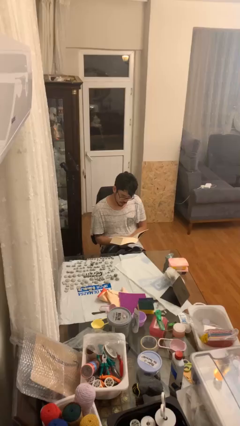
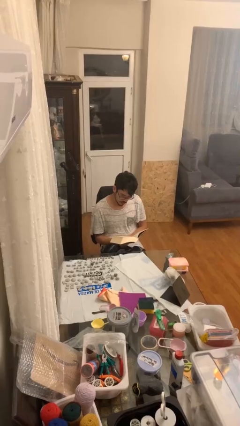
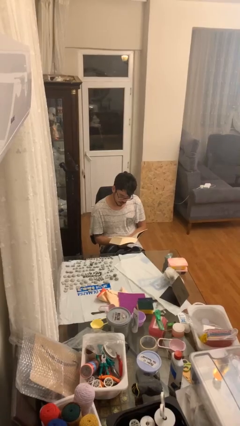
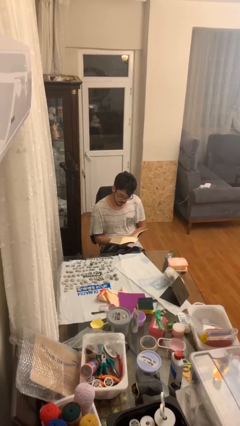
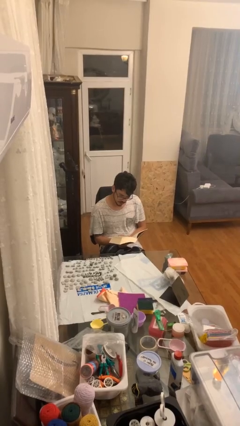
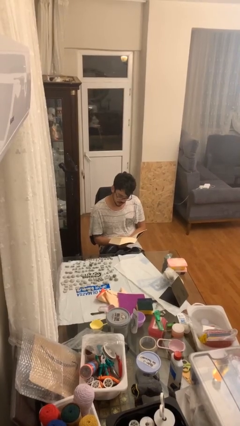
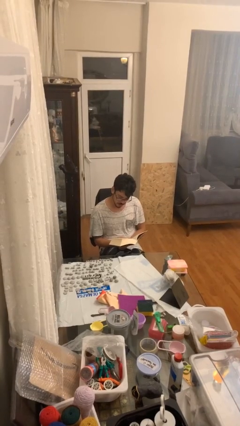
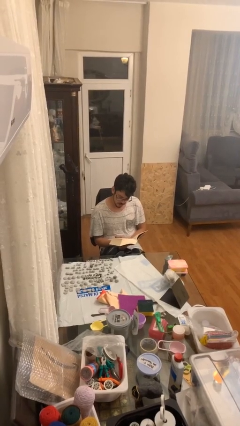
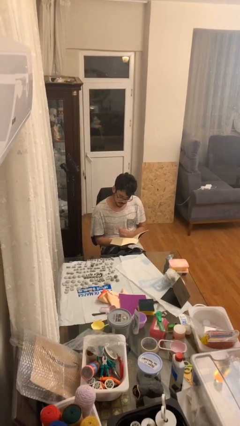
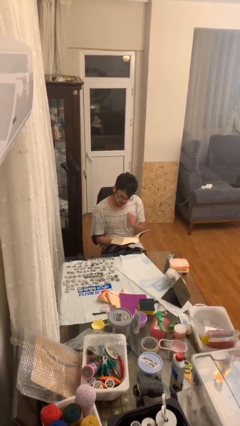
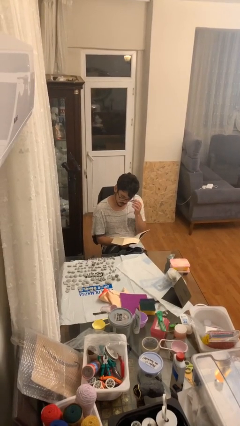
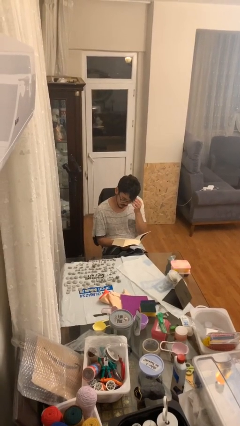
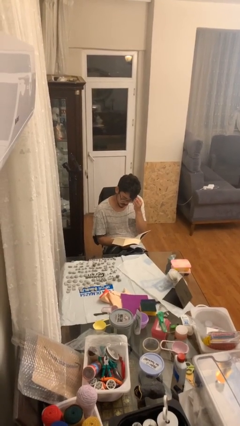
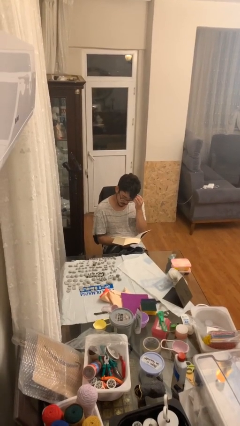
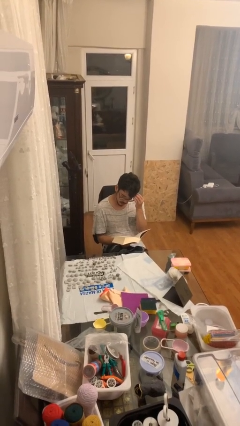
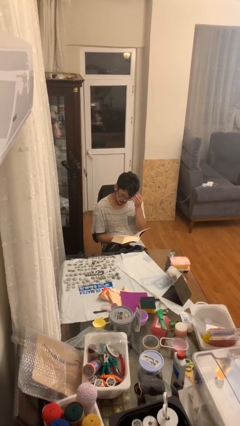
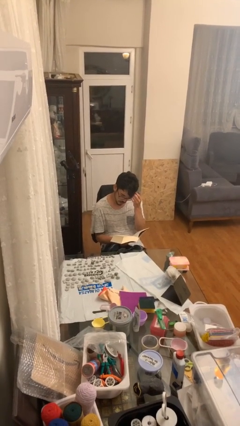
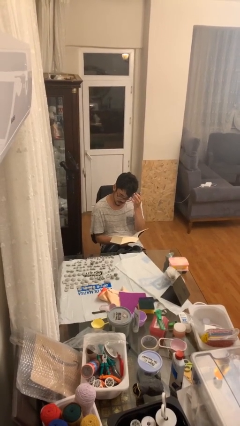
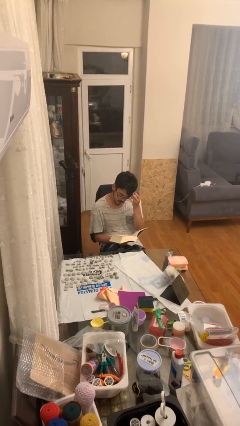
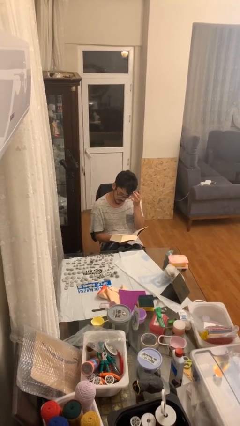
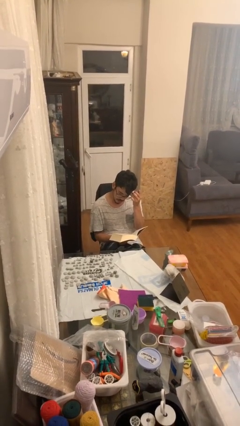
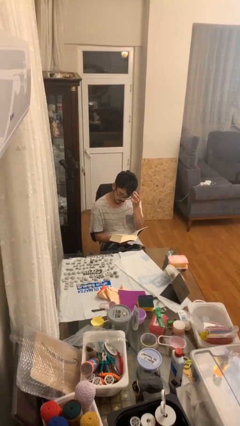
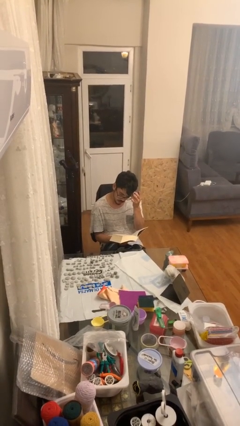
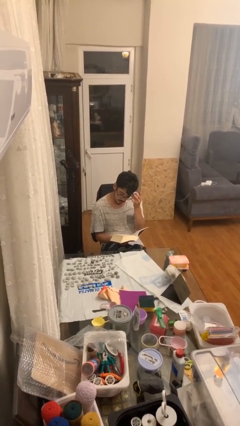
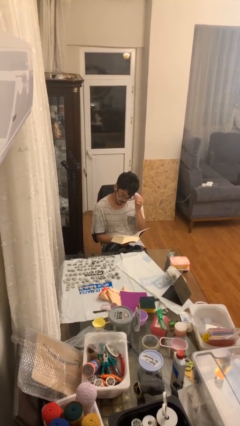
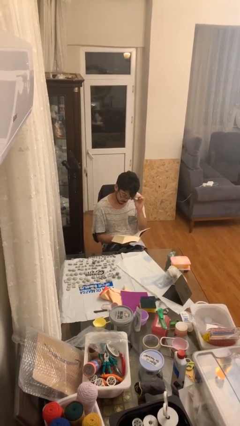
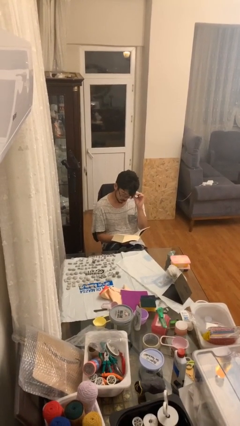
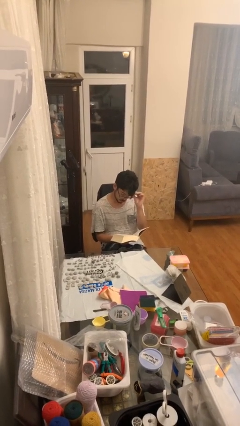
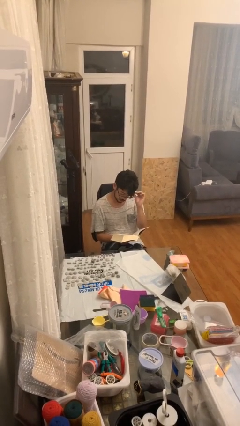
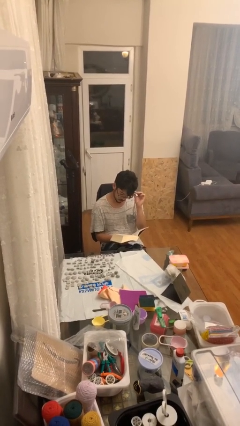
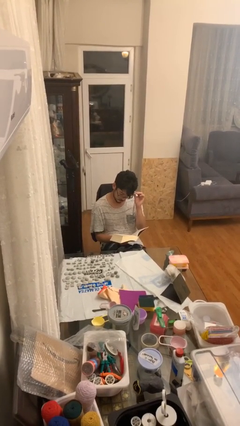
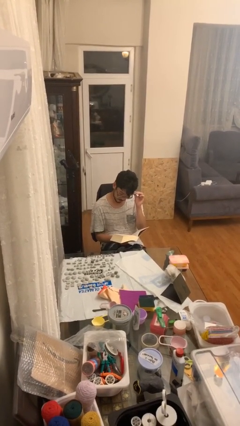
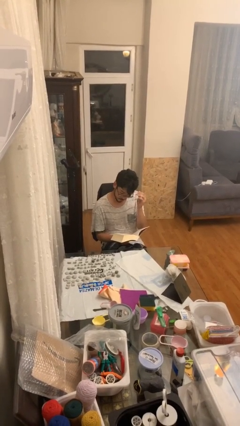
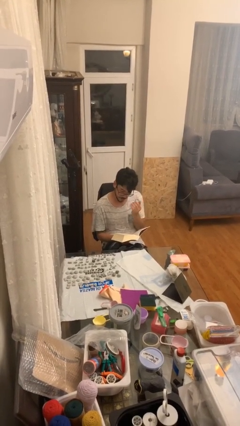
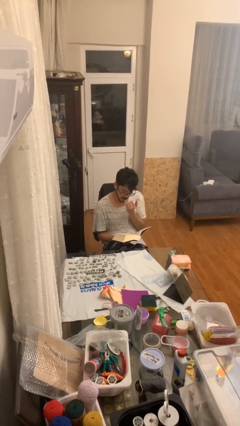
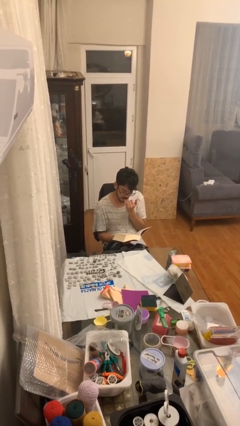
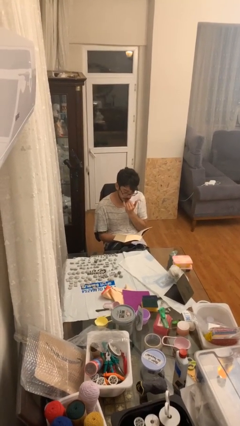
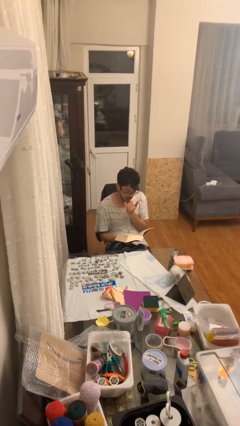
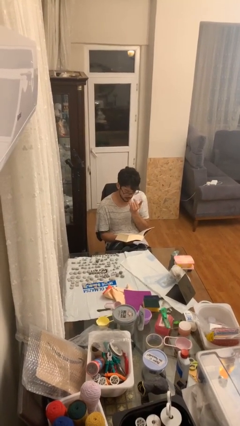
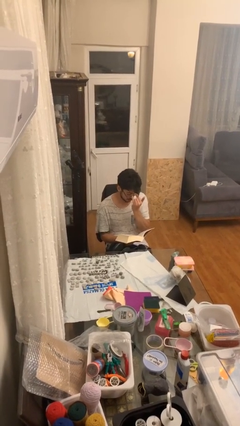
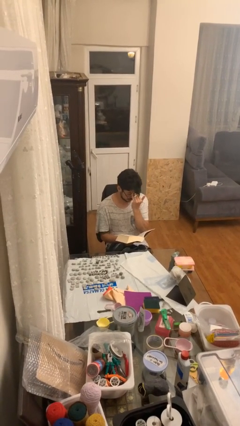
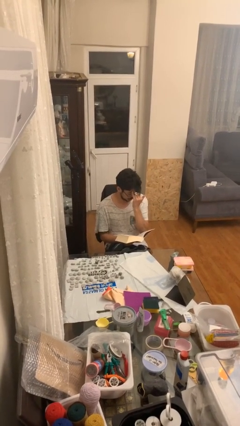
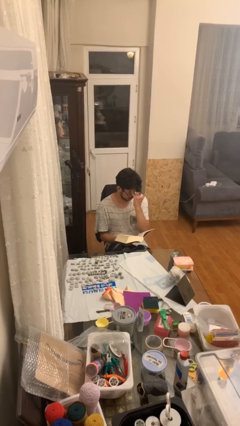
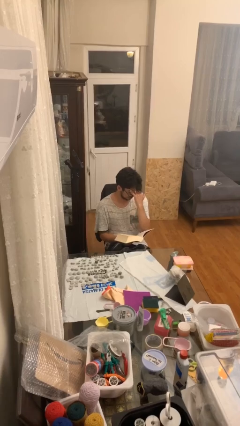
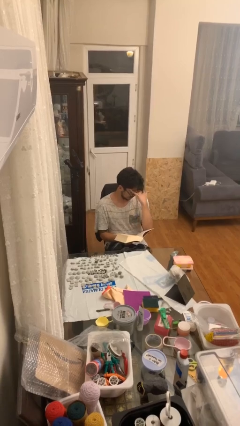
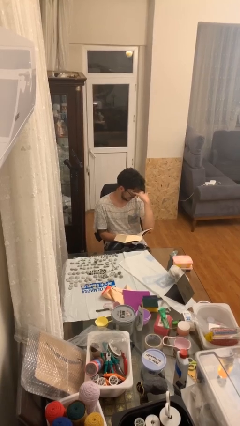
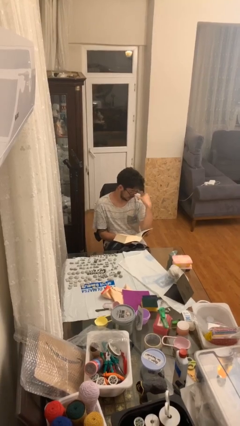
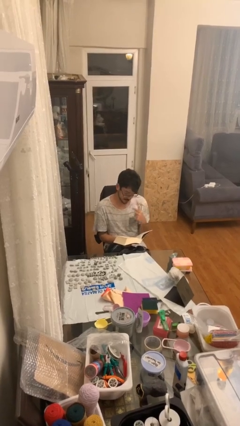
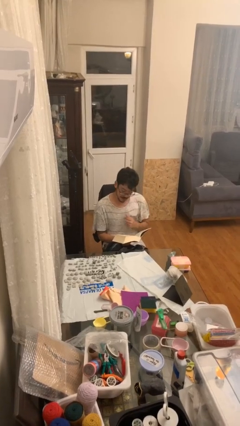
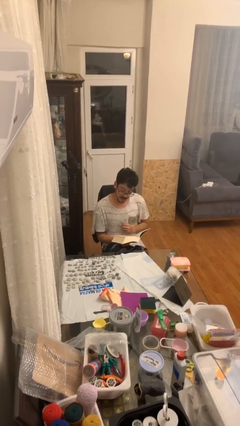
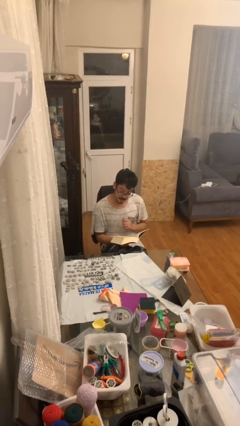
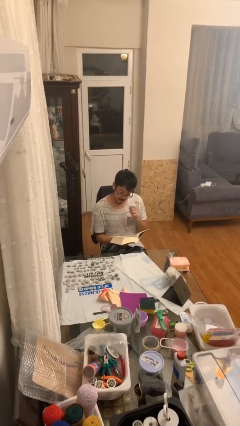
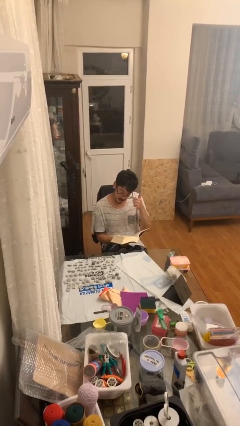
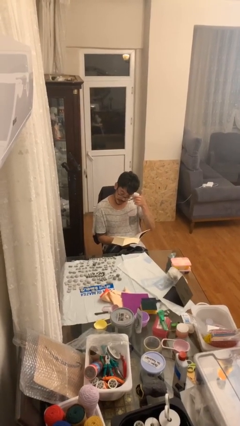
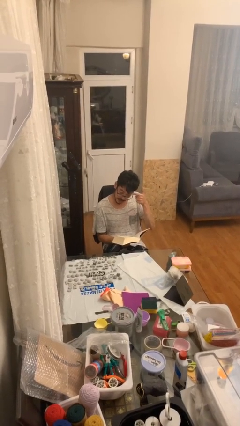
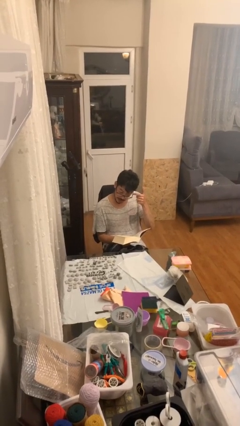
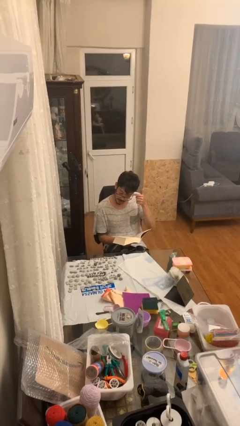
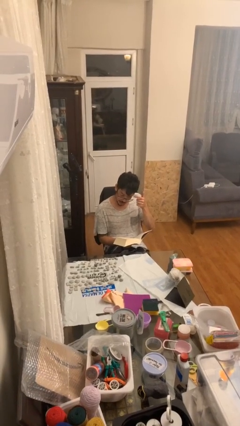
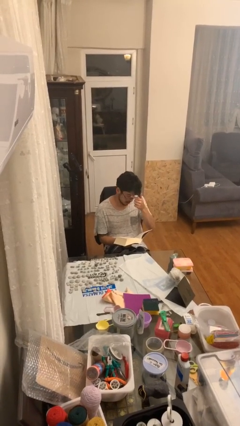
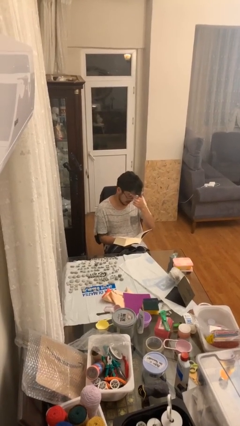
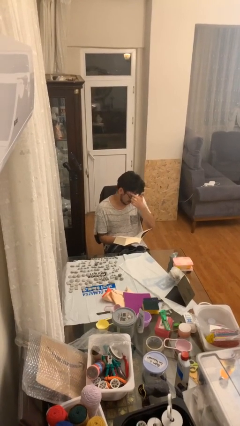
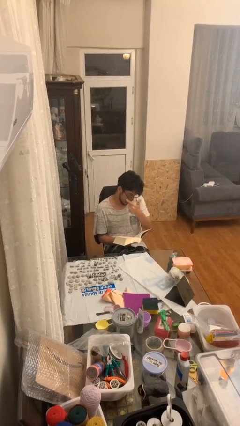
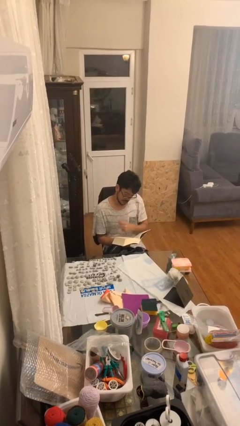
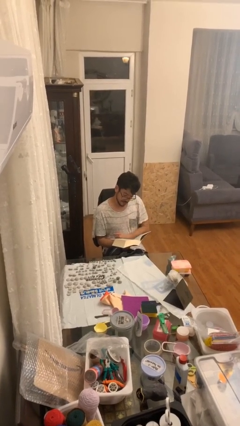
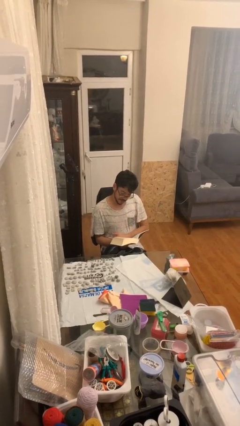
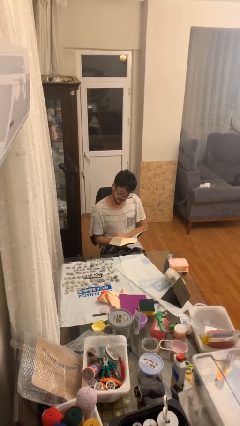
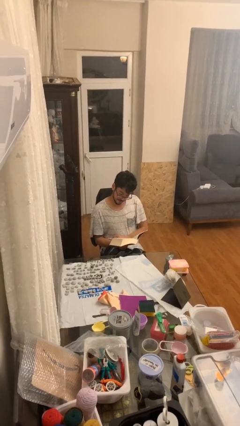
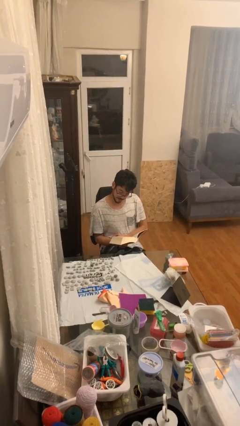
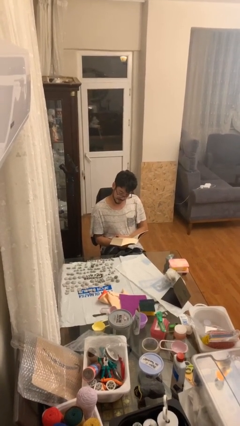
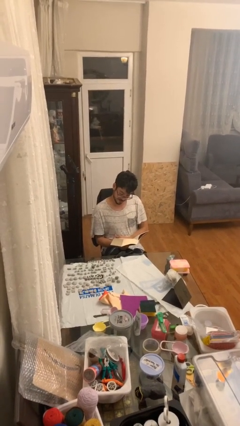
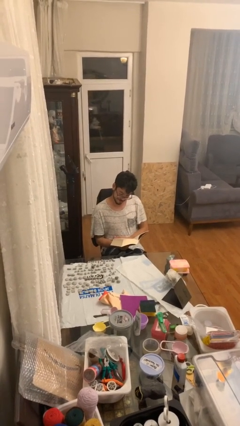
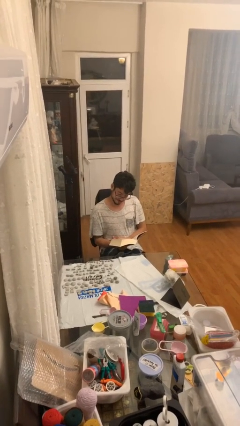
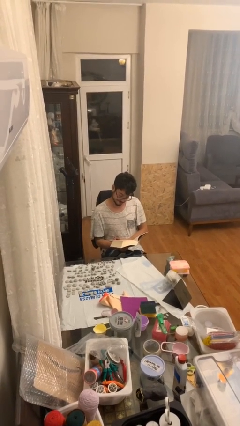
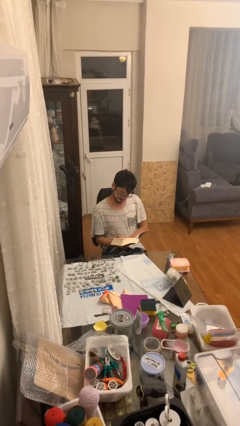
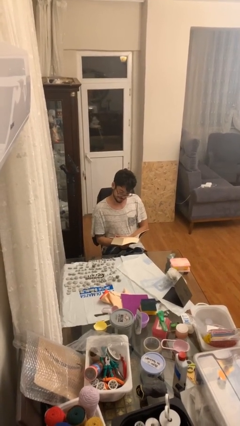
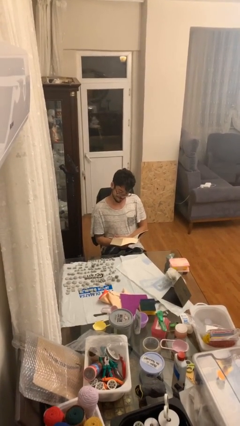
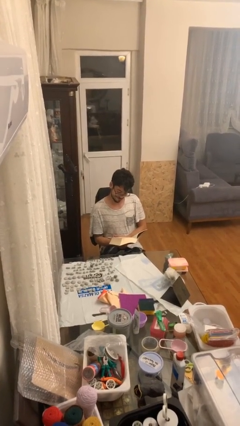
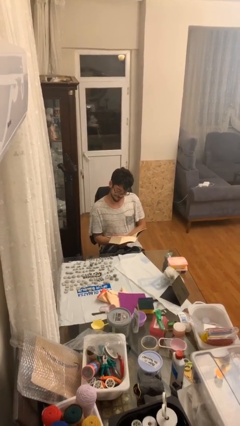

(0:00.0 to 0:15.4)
person reads document

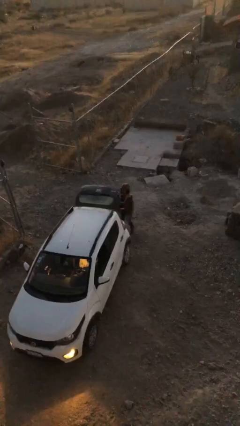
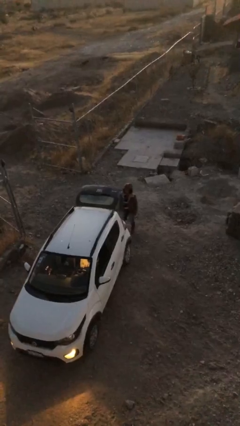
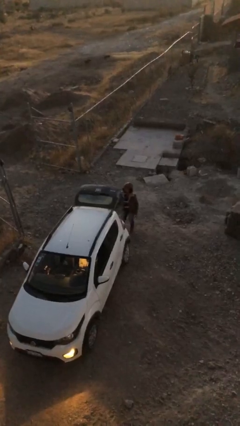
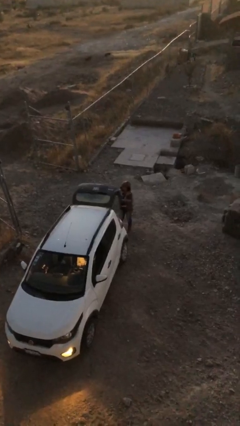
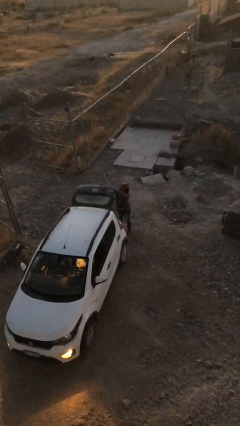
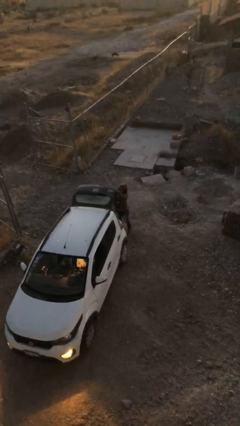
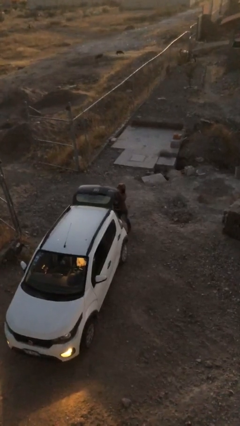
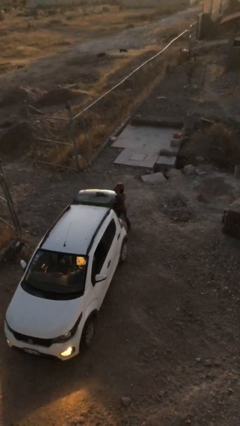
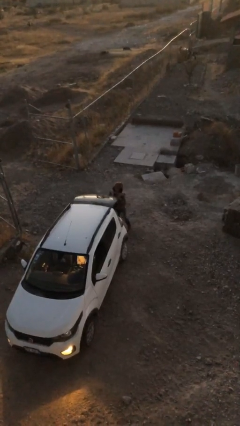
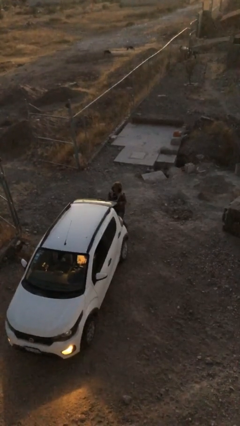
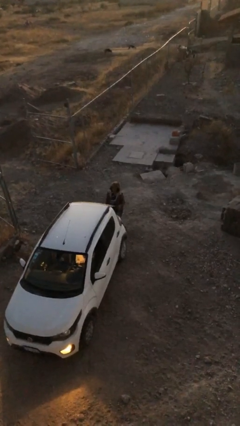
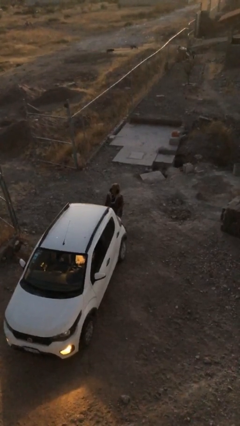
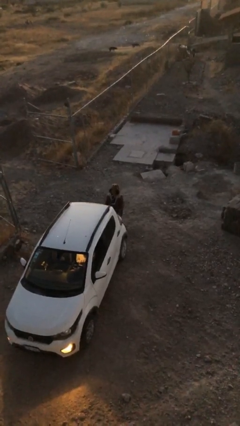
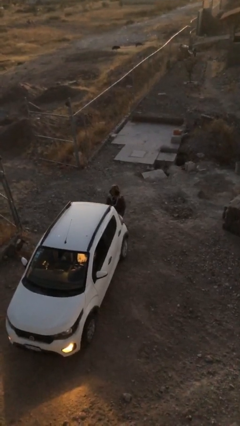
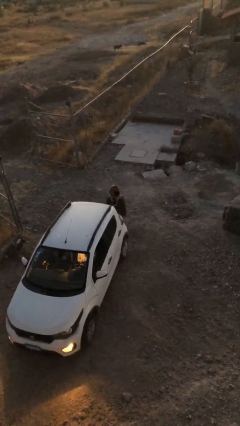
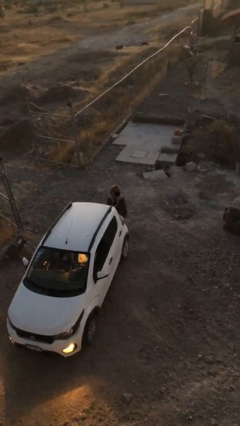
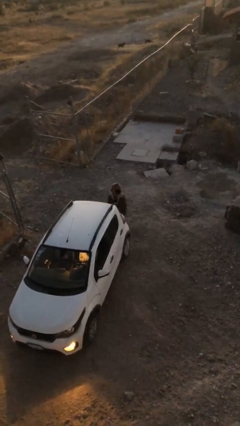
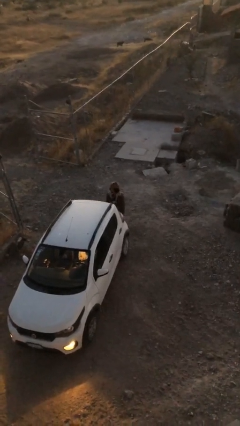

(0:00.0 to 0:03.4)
person closes car trunk
